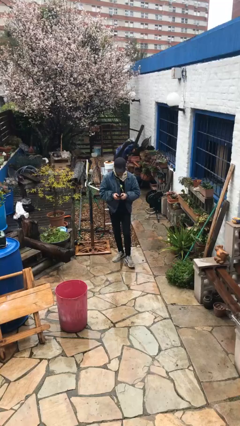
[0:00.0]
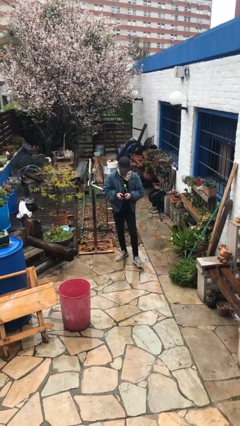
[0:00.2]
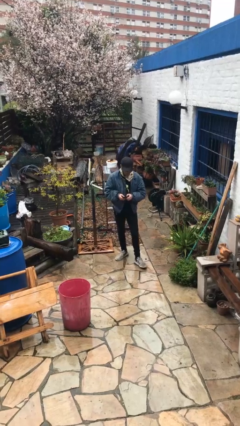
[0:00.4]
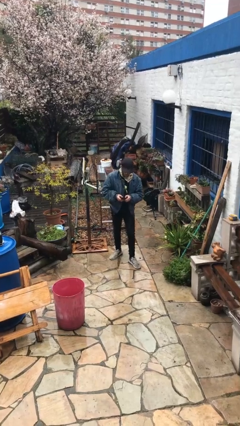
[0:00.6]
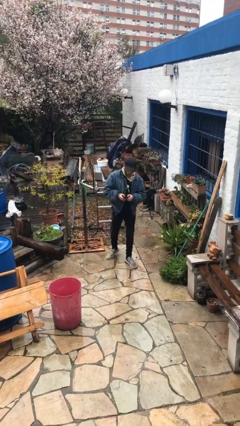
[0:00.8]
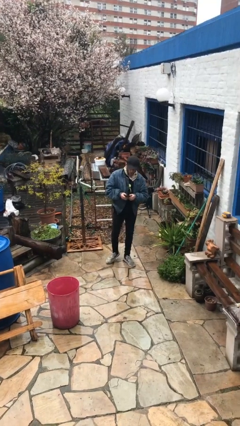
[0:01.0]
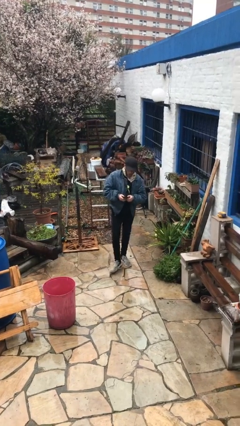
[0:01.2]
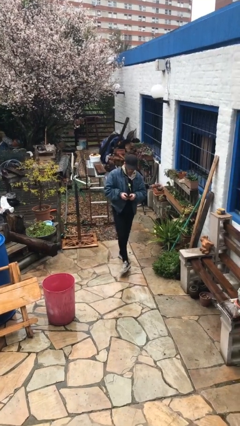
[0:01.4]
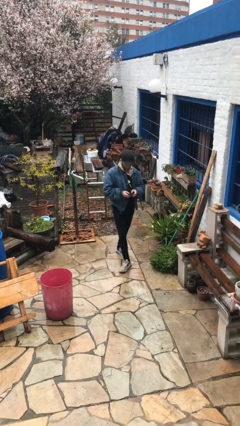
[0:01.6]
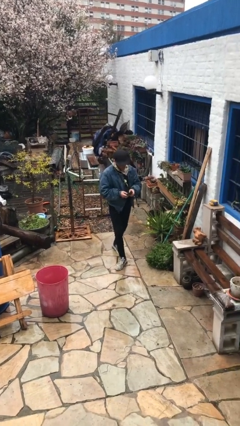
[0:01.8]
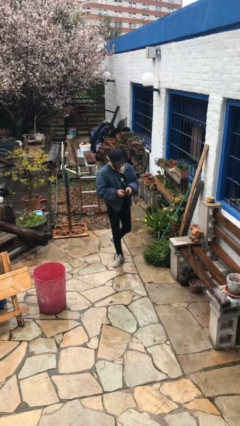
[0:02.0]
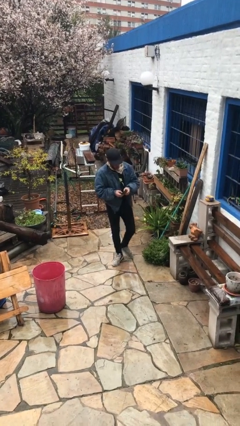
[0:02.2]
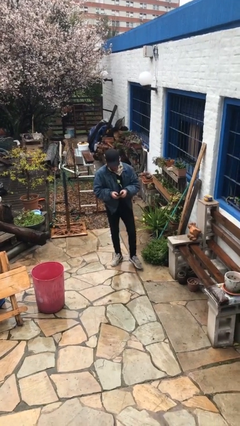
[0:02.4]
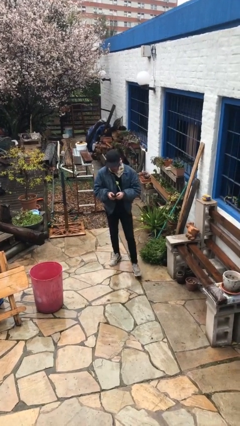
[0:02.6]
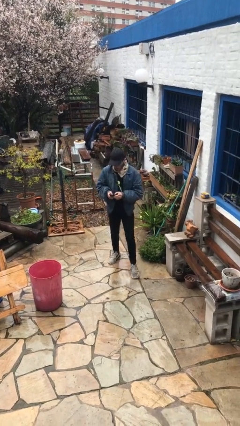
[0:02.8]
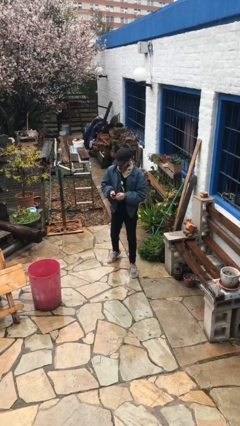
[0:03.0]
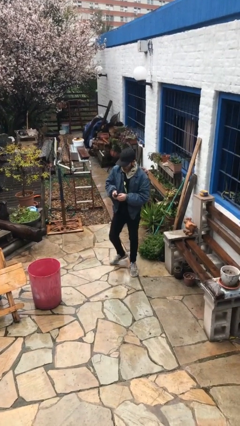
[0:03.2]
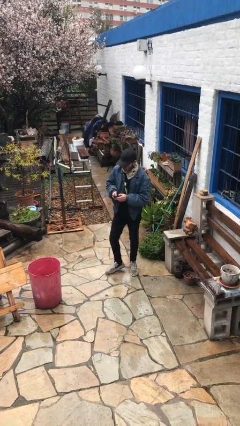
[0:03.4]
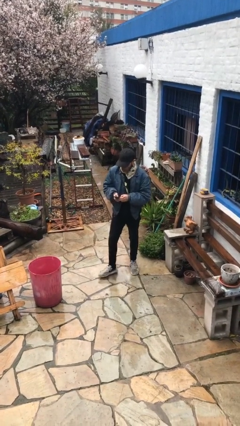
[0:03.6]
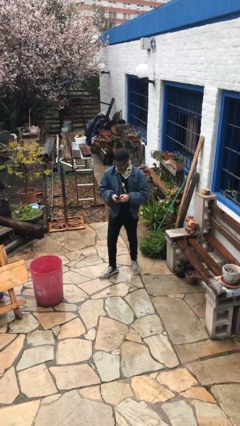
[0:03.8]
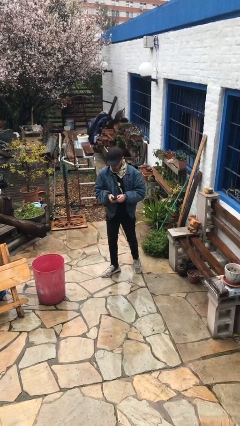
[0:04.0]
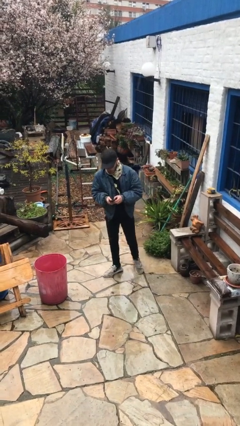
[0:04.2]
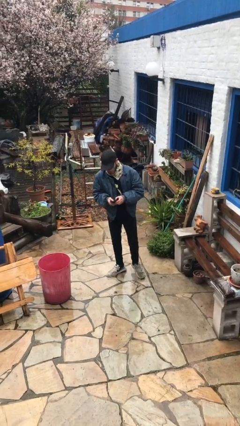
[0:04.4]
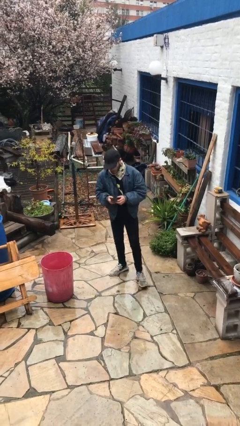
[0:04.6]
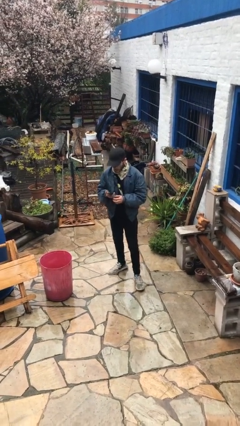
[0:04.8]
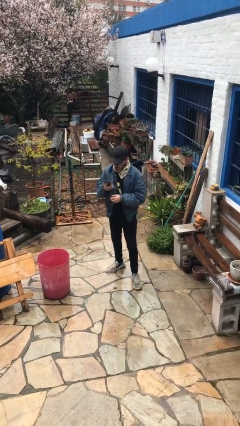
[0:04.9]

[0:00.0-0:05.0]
person texts on phone

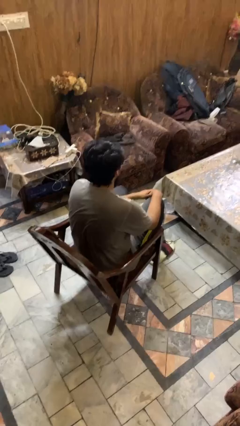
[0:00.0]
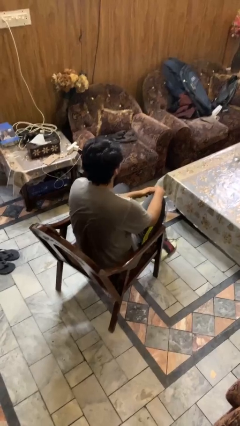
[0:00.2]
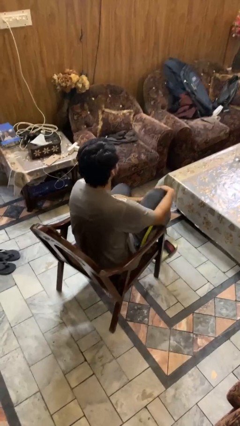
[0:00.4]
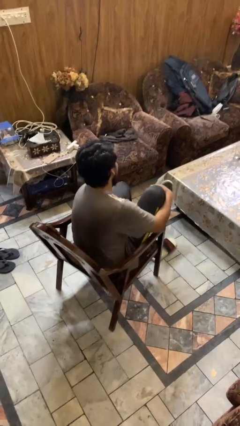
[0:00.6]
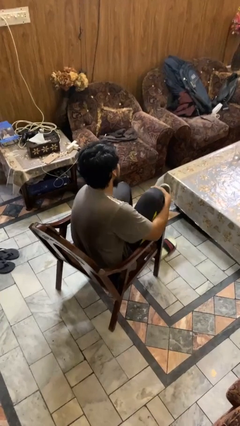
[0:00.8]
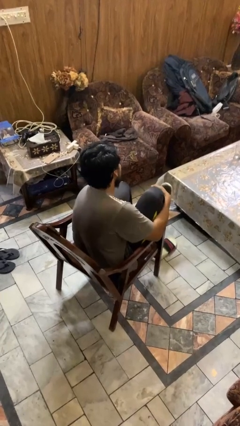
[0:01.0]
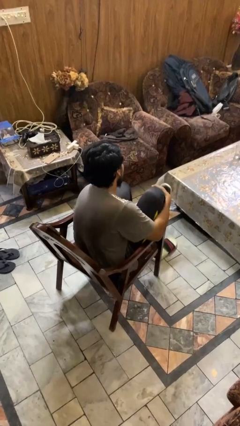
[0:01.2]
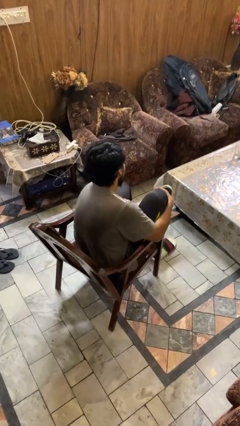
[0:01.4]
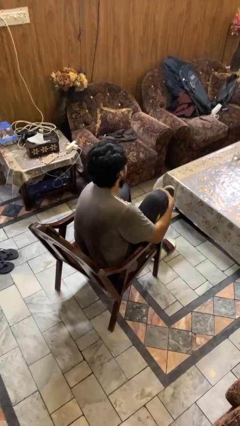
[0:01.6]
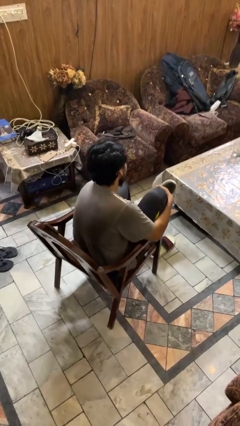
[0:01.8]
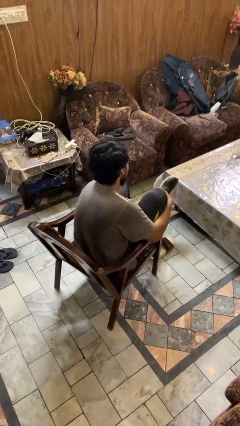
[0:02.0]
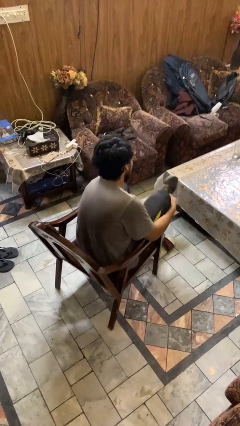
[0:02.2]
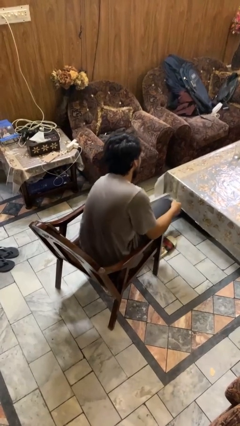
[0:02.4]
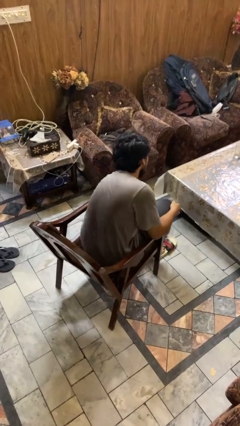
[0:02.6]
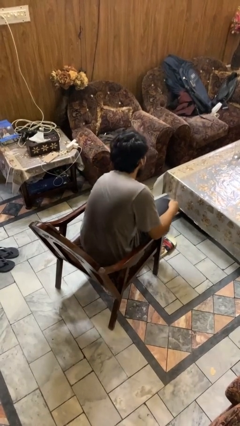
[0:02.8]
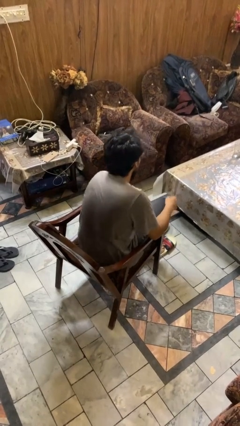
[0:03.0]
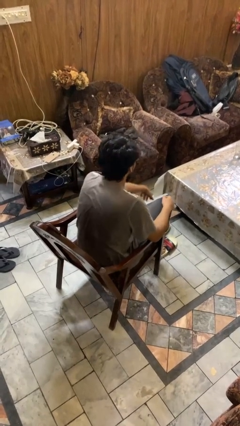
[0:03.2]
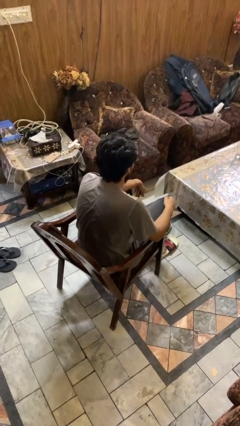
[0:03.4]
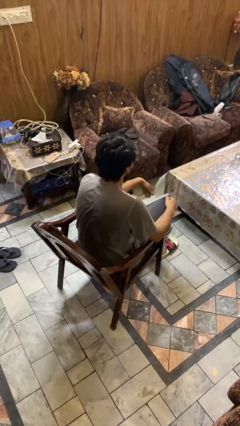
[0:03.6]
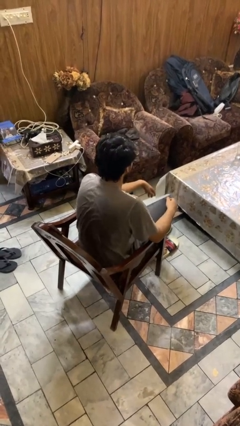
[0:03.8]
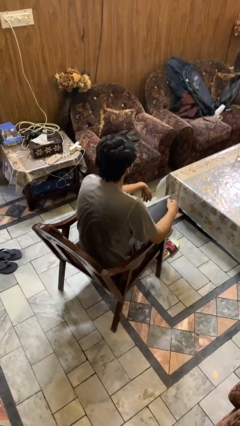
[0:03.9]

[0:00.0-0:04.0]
person takes off shoes

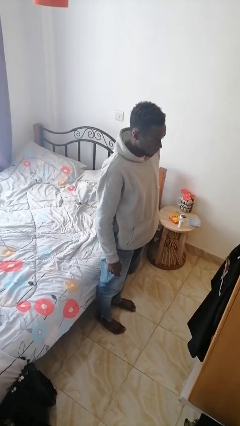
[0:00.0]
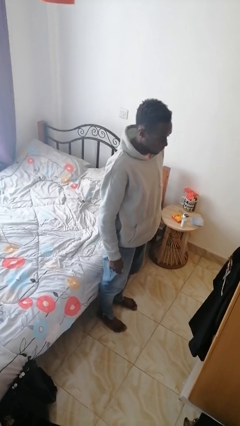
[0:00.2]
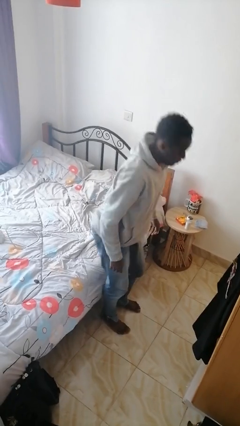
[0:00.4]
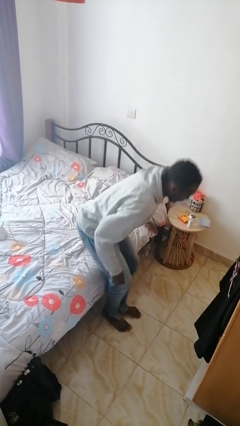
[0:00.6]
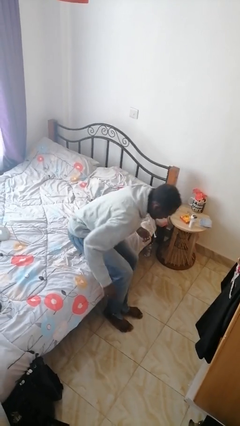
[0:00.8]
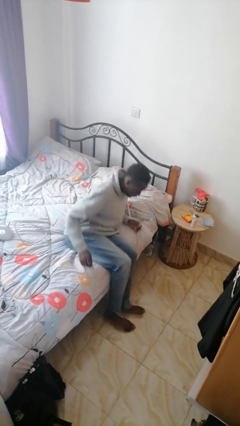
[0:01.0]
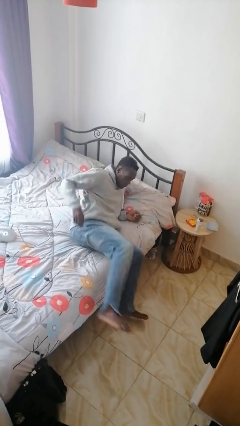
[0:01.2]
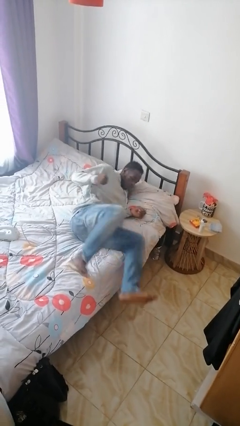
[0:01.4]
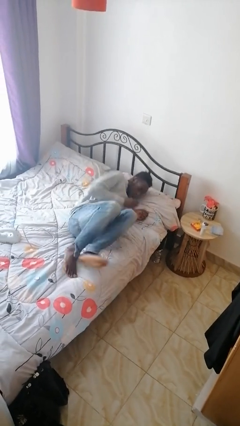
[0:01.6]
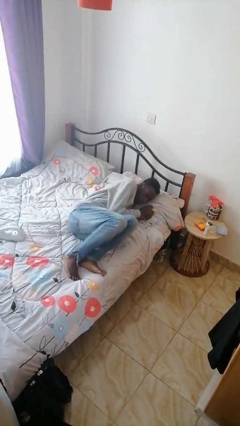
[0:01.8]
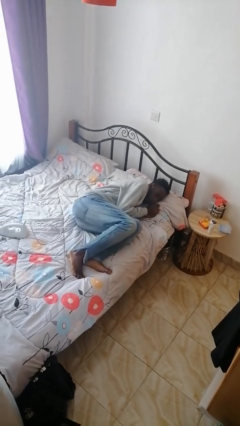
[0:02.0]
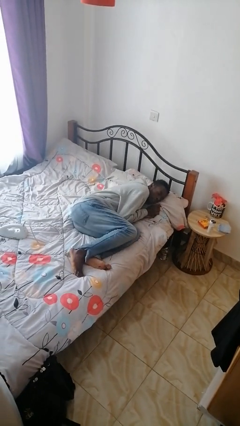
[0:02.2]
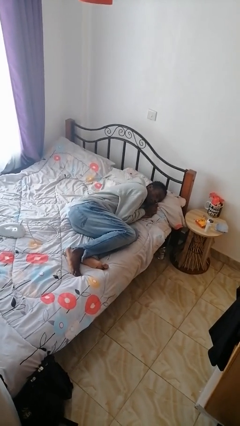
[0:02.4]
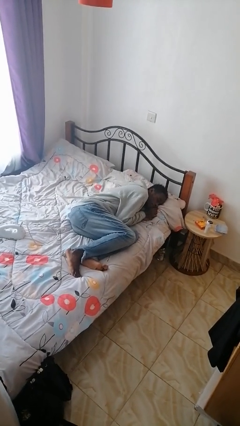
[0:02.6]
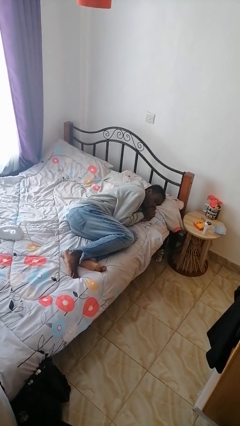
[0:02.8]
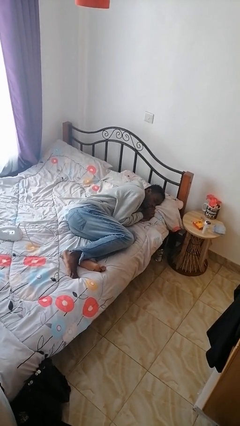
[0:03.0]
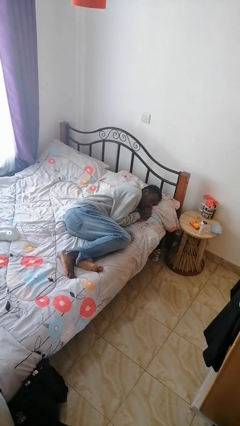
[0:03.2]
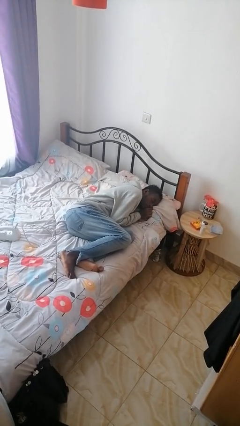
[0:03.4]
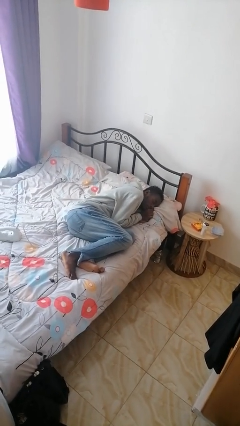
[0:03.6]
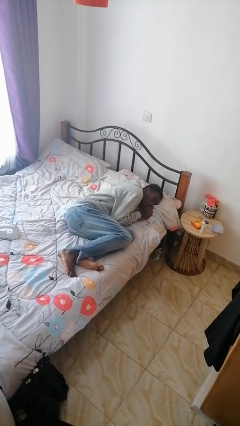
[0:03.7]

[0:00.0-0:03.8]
person lies down on bed

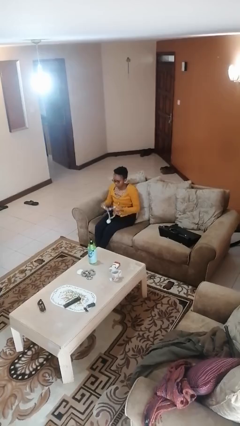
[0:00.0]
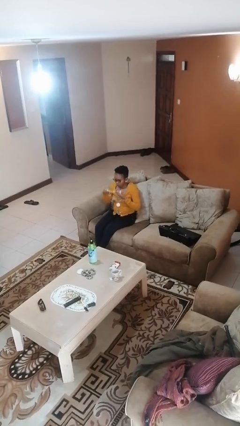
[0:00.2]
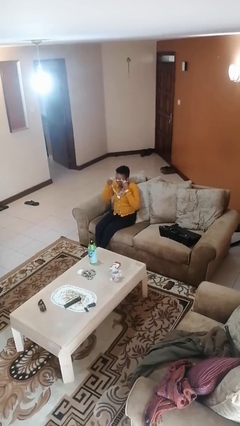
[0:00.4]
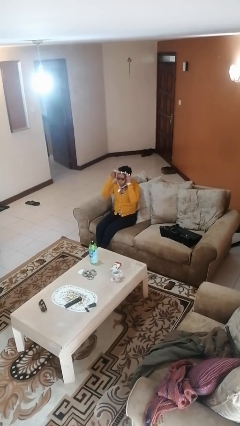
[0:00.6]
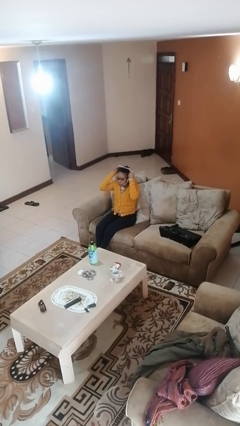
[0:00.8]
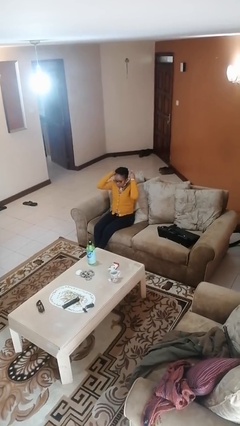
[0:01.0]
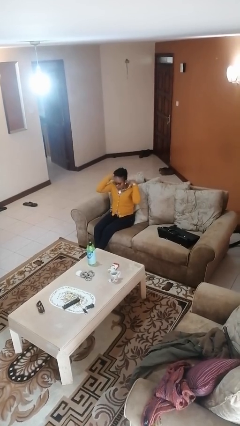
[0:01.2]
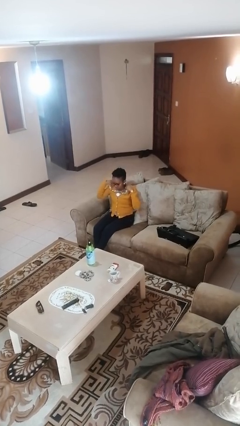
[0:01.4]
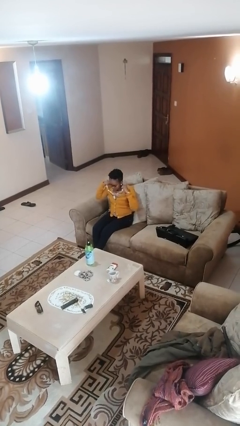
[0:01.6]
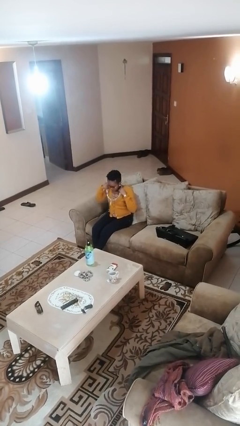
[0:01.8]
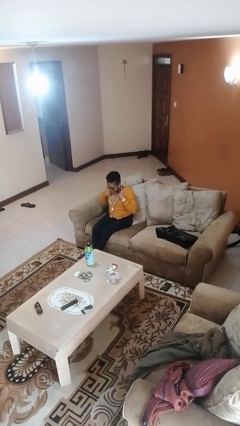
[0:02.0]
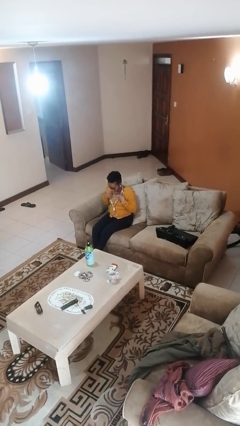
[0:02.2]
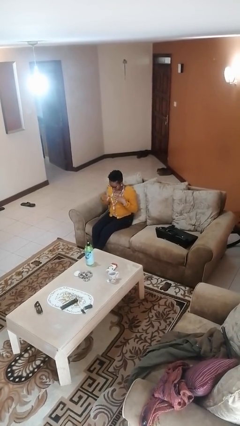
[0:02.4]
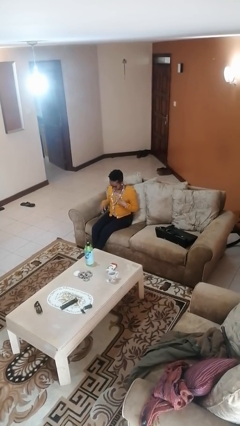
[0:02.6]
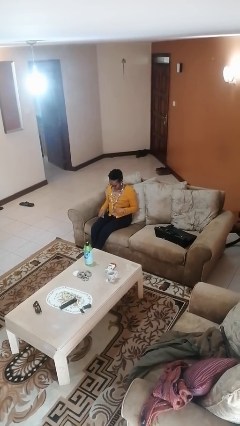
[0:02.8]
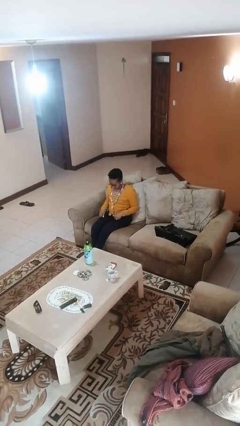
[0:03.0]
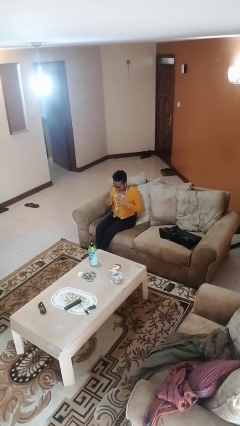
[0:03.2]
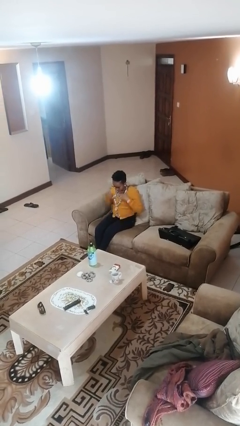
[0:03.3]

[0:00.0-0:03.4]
person puts on necklace

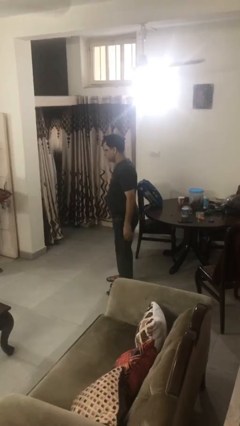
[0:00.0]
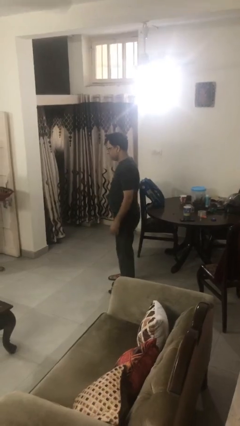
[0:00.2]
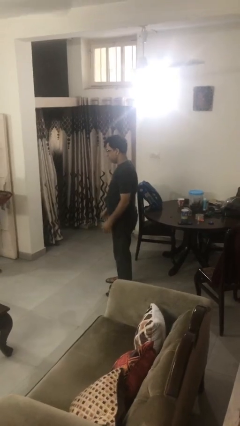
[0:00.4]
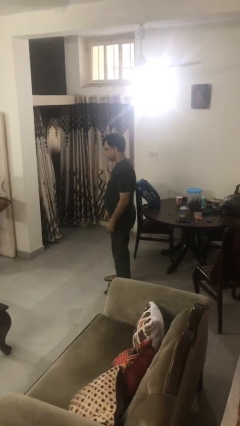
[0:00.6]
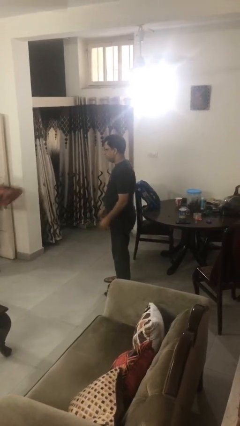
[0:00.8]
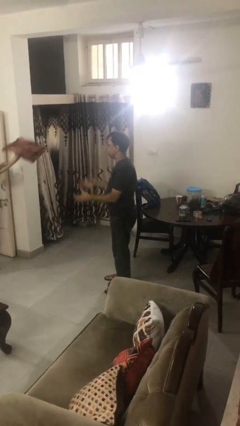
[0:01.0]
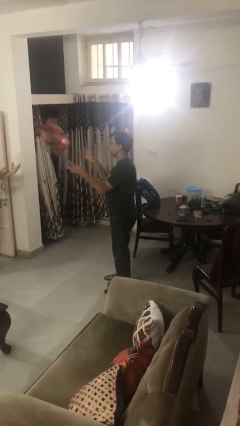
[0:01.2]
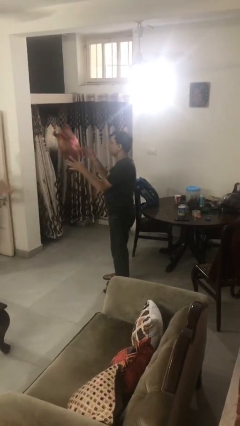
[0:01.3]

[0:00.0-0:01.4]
person catches object from person
